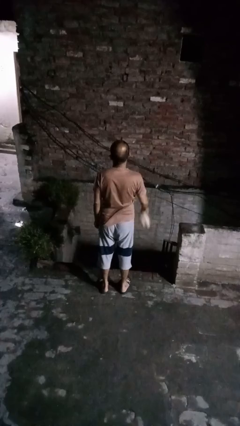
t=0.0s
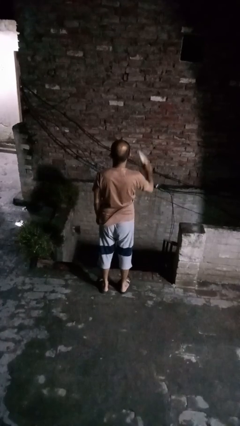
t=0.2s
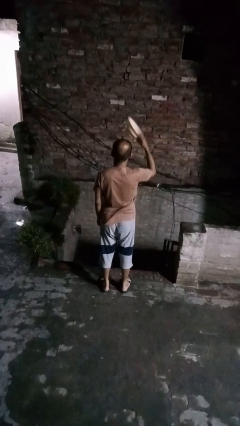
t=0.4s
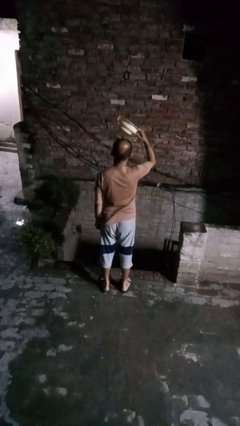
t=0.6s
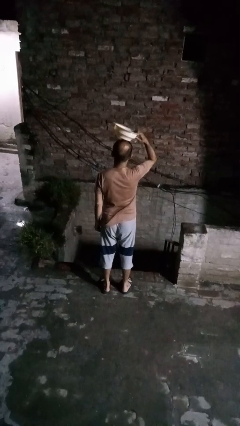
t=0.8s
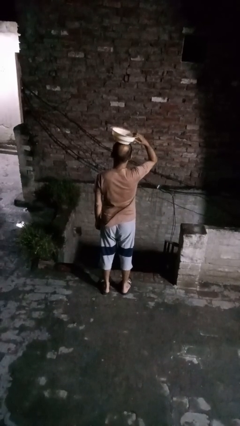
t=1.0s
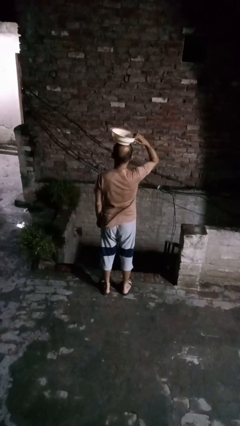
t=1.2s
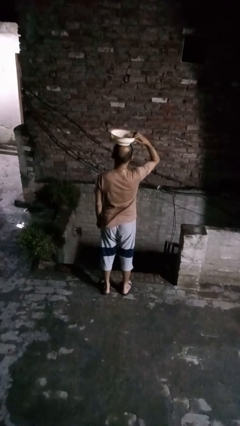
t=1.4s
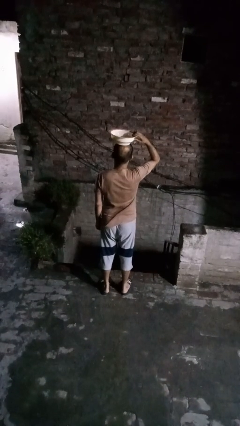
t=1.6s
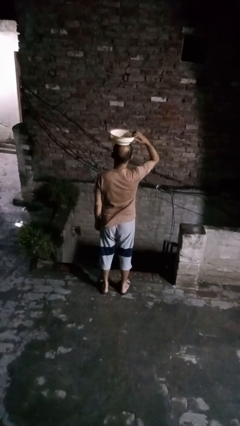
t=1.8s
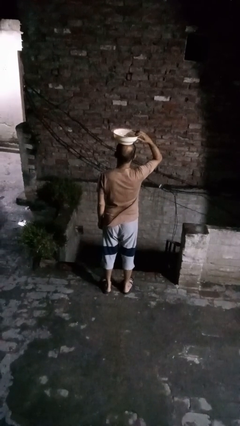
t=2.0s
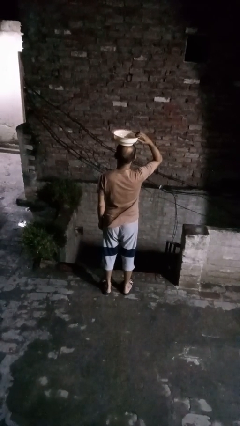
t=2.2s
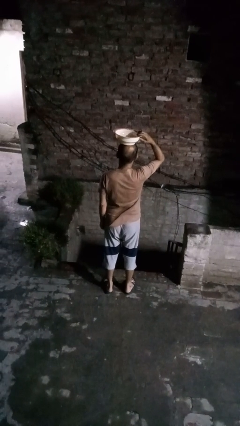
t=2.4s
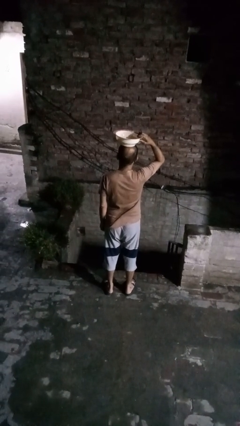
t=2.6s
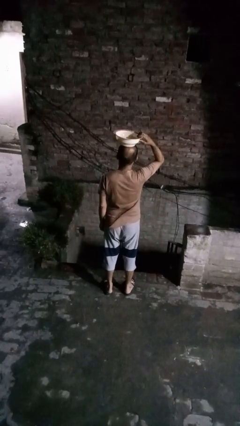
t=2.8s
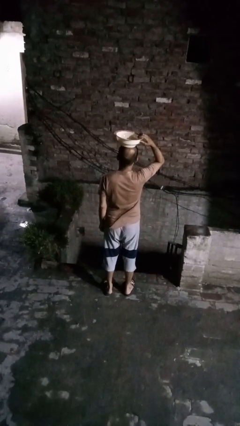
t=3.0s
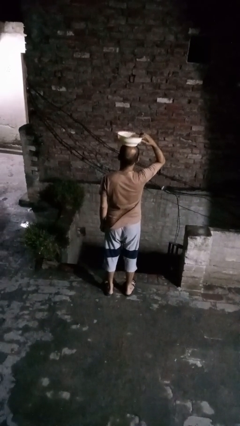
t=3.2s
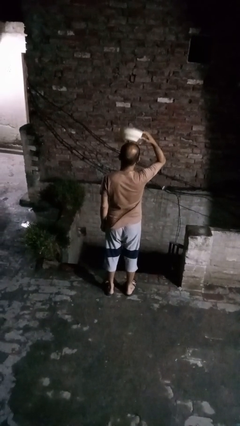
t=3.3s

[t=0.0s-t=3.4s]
person holds object above head

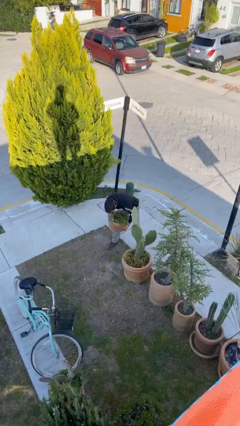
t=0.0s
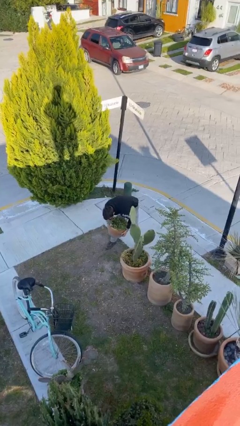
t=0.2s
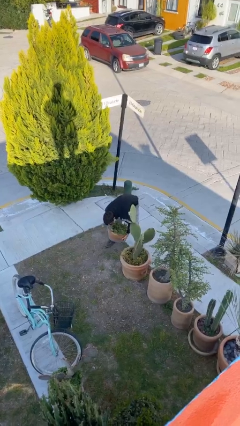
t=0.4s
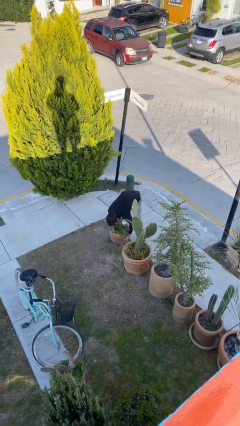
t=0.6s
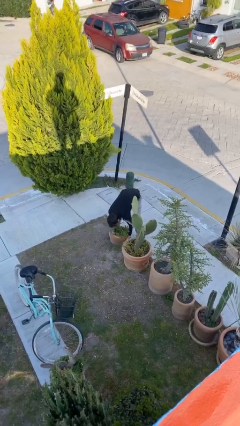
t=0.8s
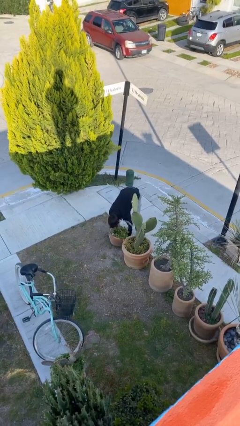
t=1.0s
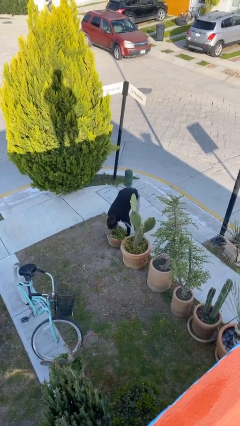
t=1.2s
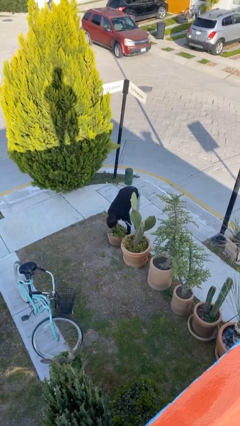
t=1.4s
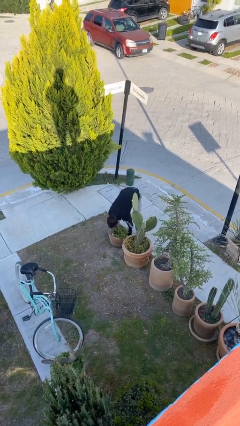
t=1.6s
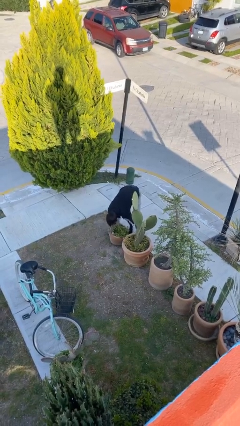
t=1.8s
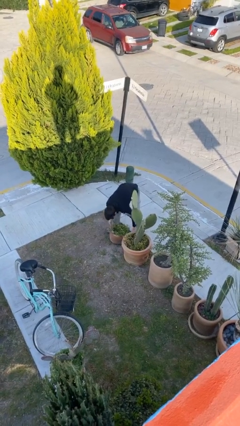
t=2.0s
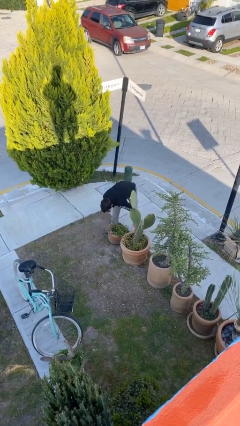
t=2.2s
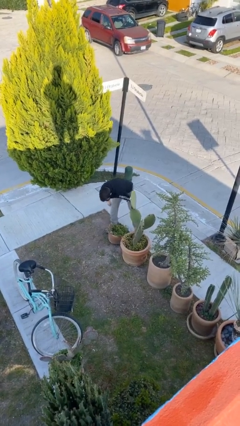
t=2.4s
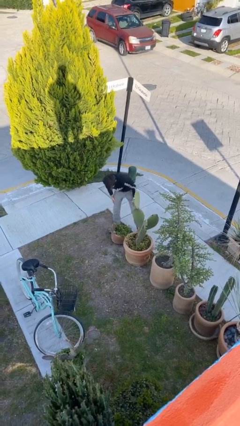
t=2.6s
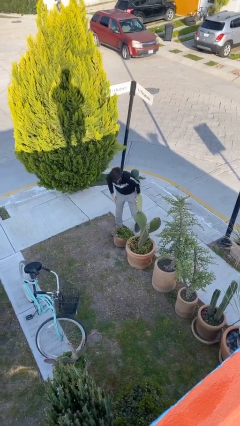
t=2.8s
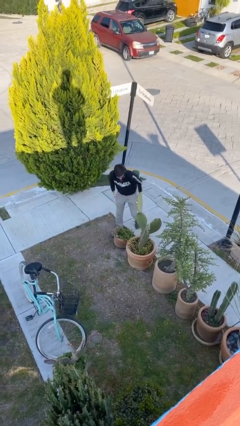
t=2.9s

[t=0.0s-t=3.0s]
person puts down object on floor

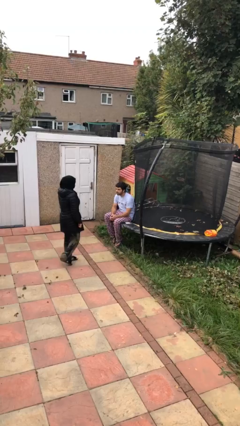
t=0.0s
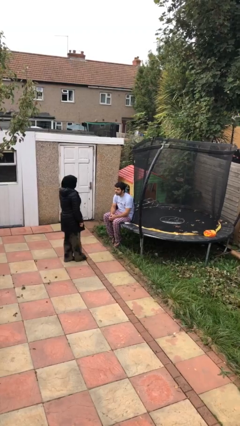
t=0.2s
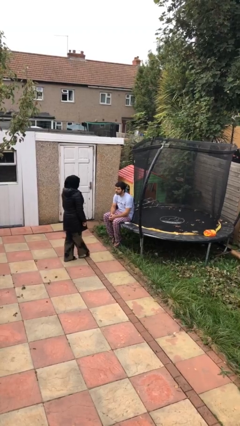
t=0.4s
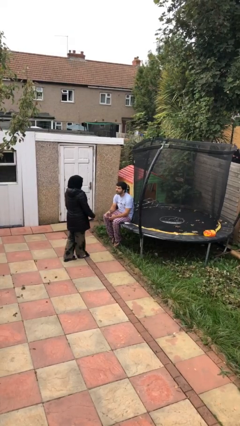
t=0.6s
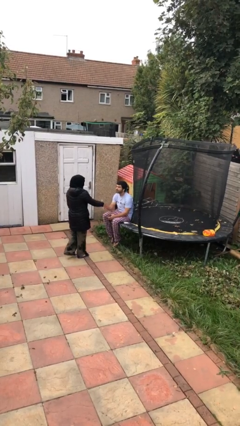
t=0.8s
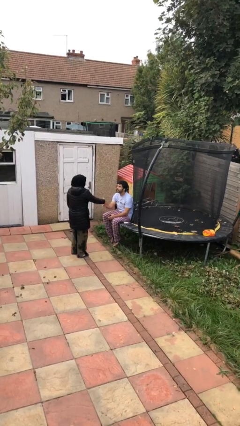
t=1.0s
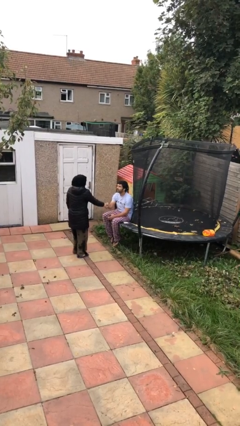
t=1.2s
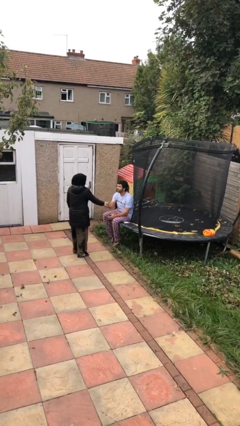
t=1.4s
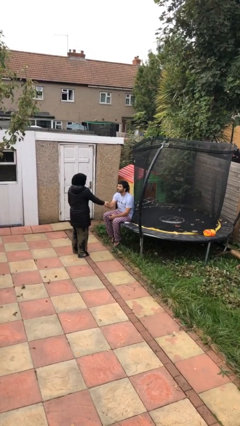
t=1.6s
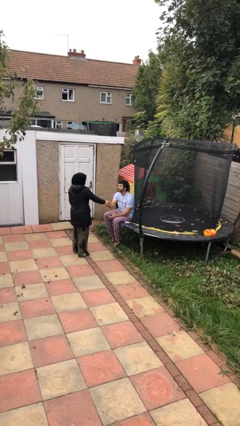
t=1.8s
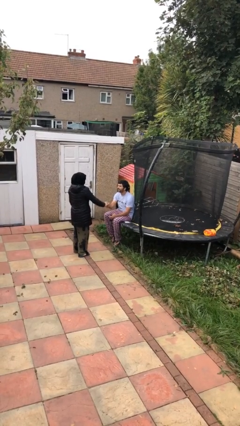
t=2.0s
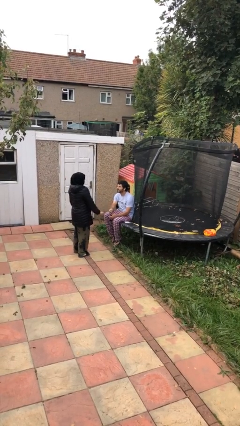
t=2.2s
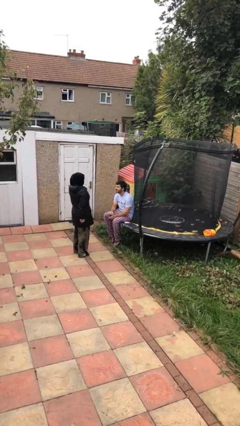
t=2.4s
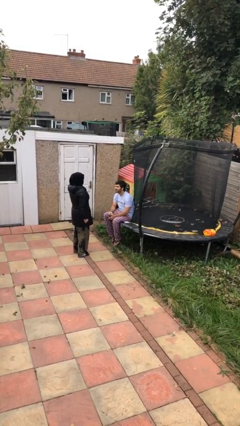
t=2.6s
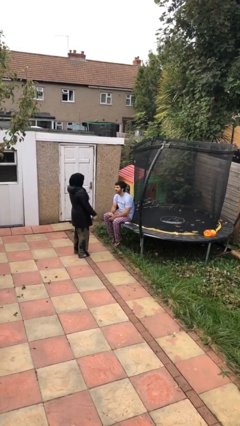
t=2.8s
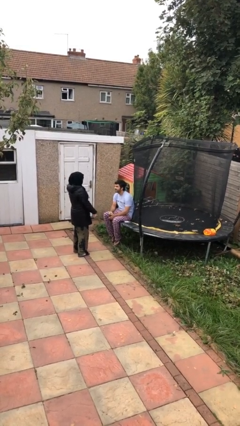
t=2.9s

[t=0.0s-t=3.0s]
person shakes hand

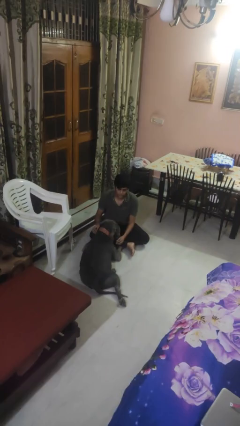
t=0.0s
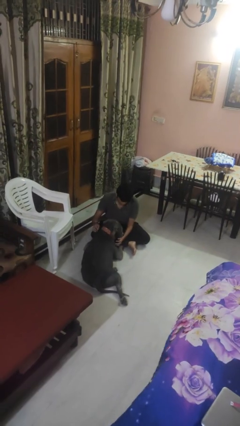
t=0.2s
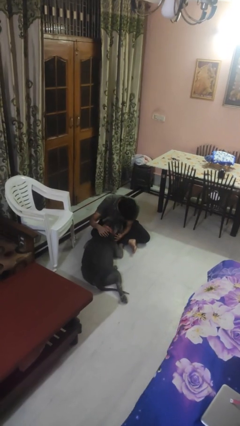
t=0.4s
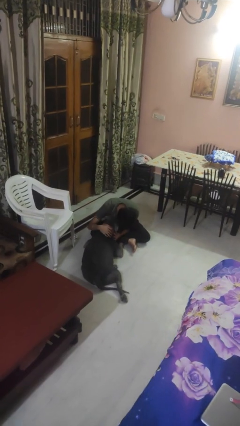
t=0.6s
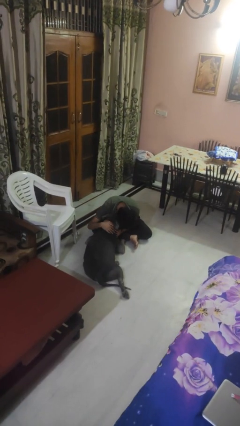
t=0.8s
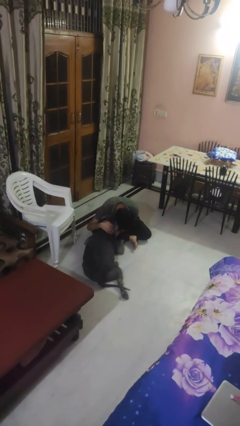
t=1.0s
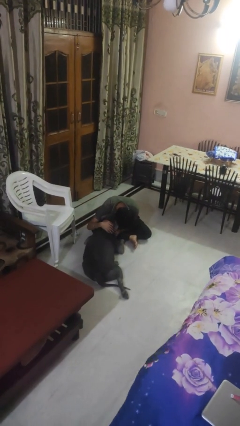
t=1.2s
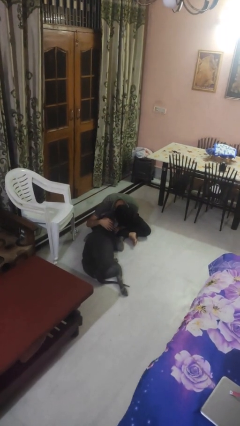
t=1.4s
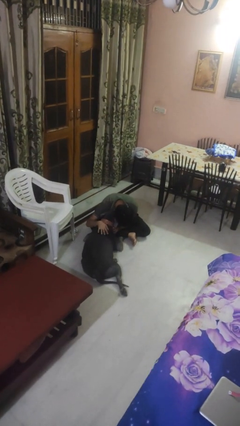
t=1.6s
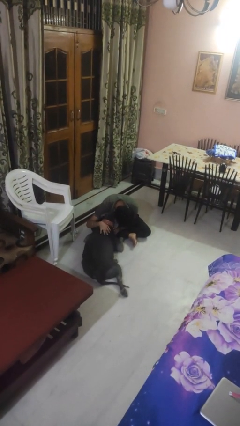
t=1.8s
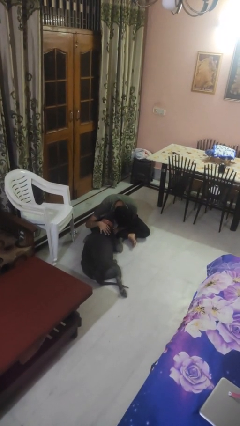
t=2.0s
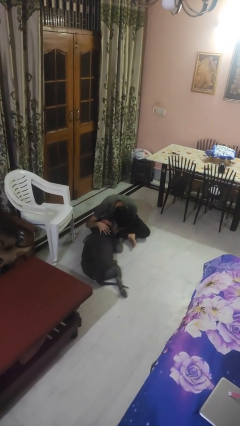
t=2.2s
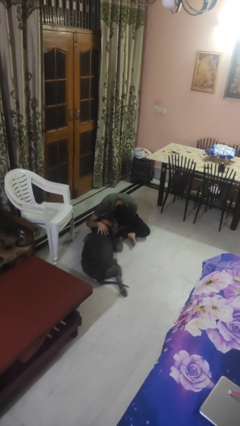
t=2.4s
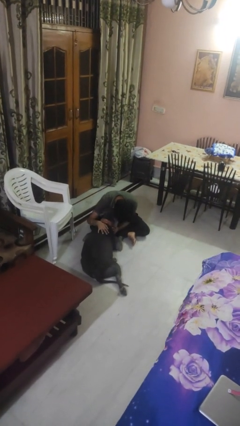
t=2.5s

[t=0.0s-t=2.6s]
person hugs dog

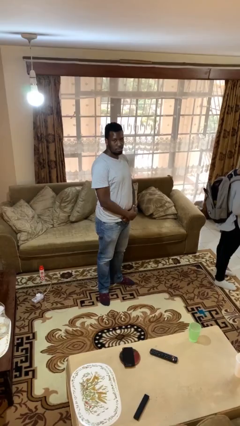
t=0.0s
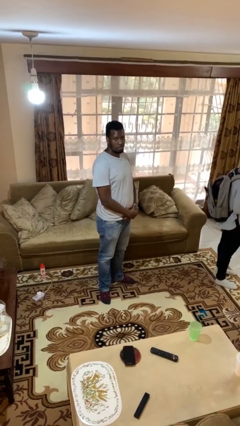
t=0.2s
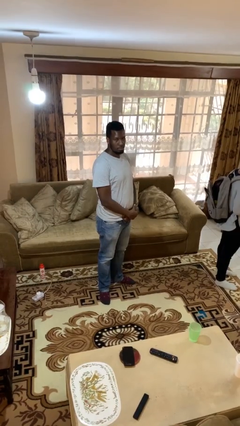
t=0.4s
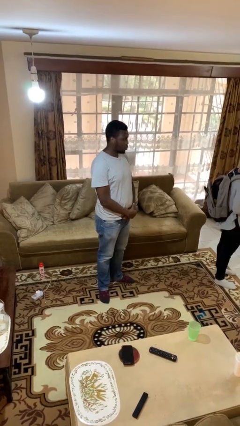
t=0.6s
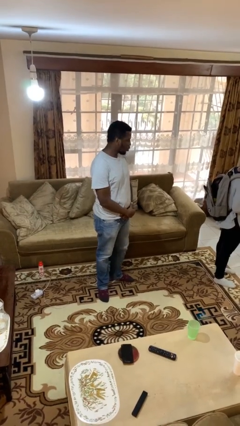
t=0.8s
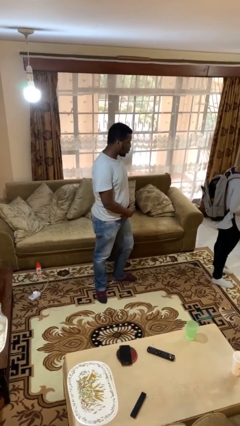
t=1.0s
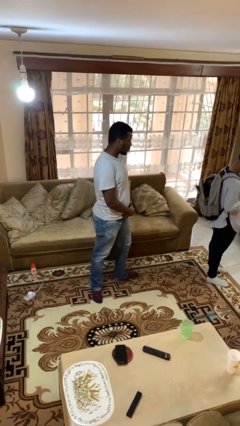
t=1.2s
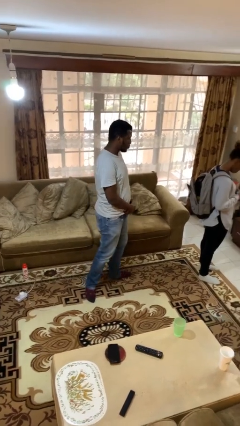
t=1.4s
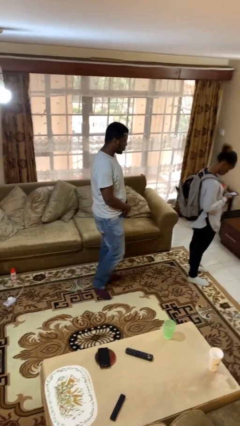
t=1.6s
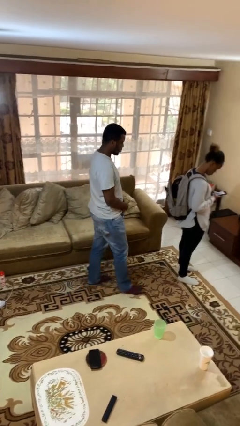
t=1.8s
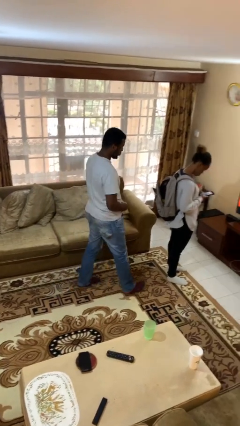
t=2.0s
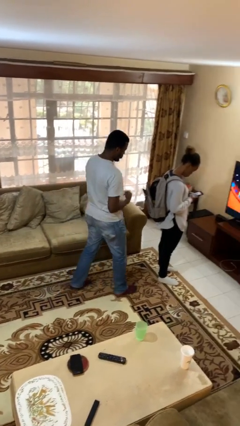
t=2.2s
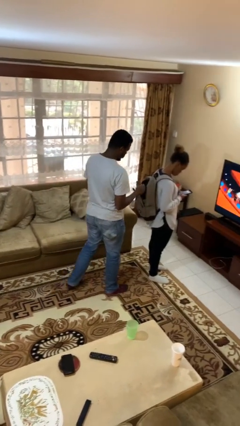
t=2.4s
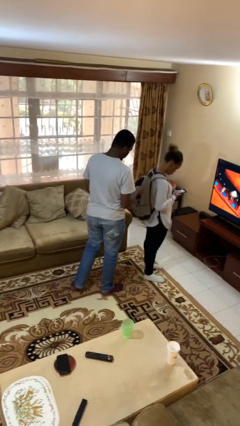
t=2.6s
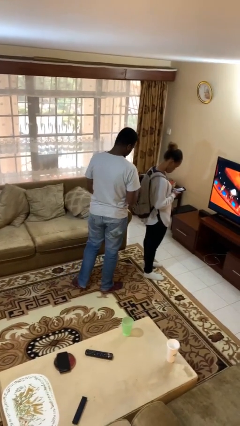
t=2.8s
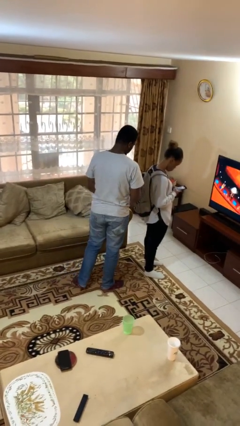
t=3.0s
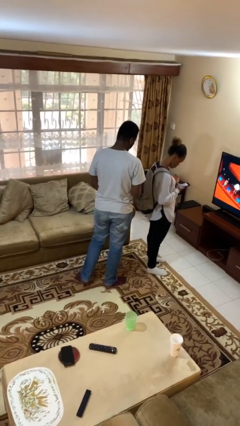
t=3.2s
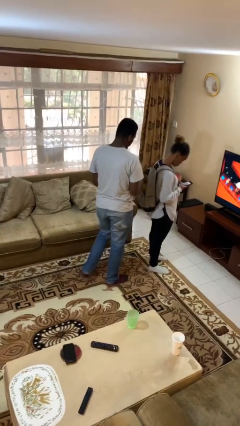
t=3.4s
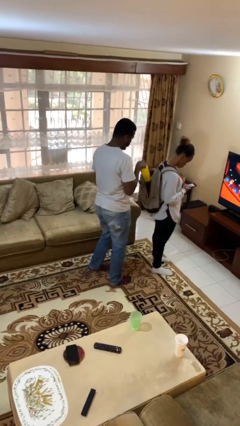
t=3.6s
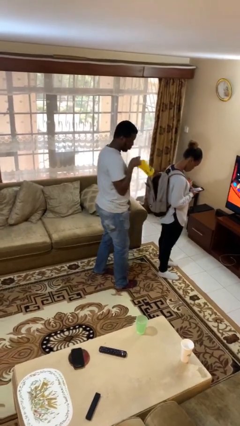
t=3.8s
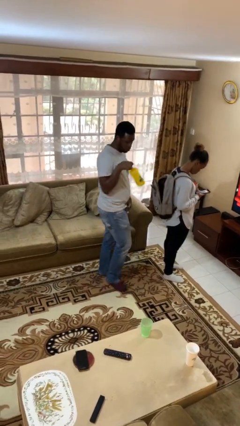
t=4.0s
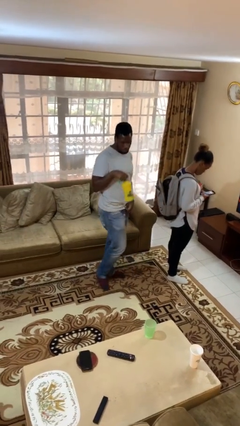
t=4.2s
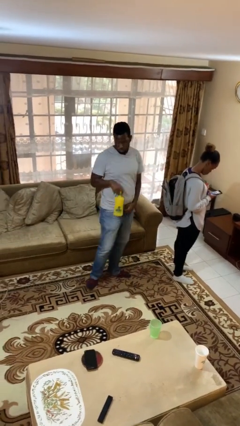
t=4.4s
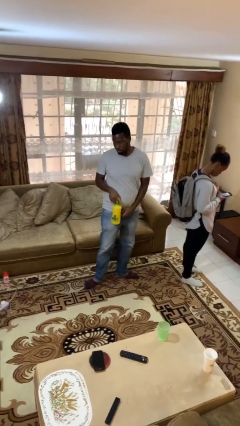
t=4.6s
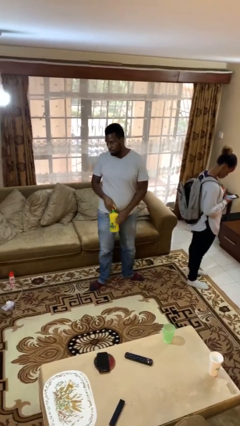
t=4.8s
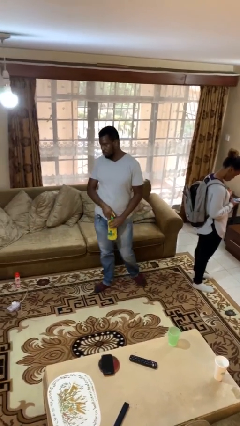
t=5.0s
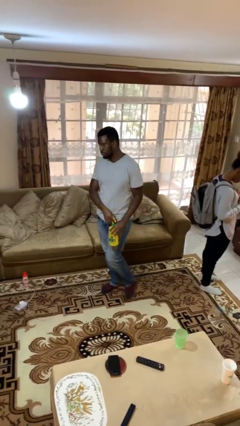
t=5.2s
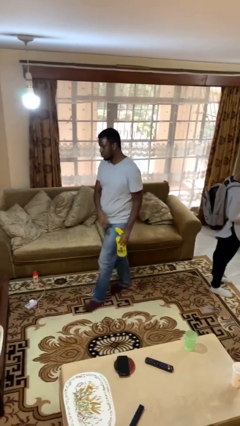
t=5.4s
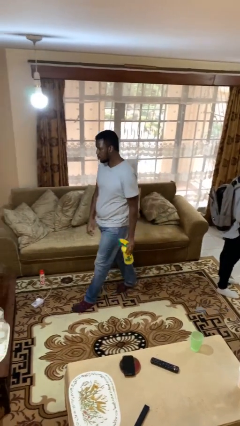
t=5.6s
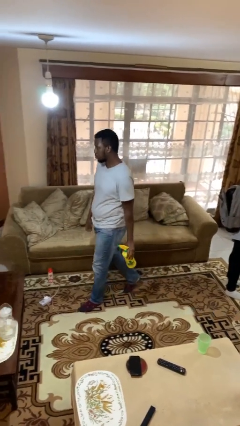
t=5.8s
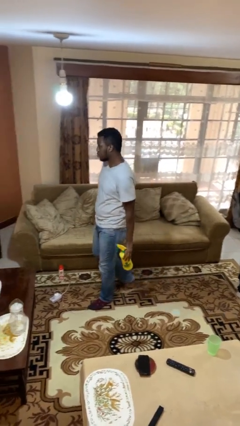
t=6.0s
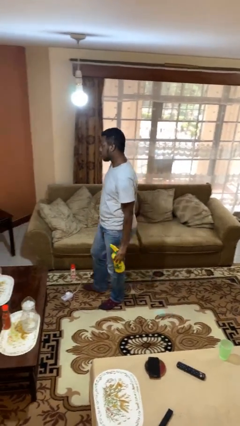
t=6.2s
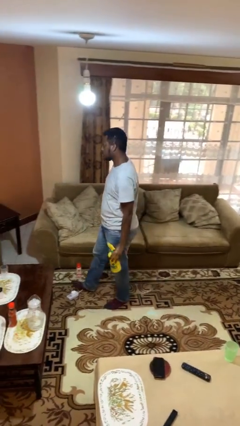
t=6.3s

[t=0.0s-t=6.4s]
person steals object from person
